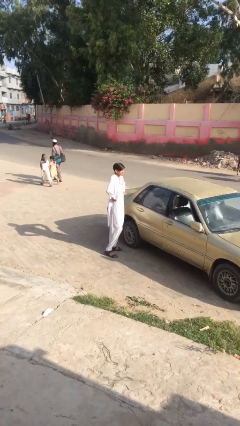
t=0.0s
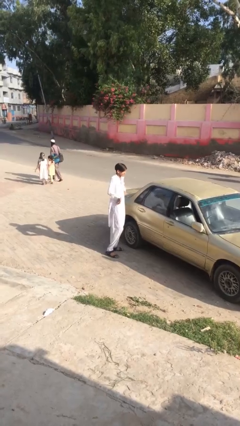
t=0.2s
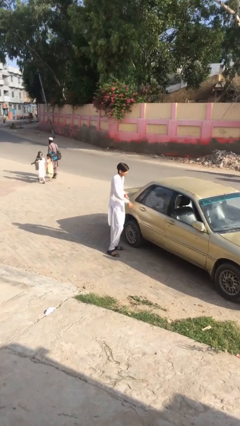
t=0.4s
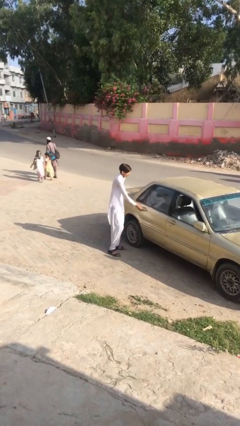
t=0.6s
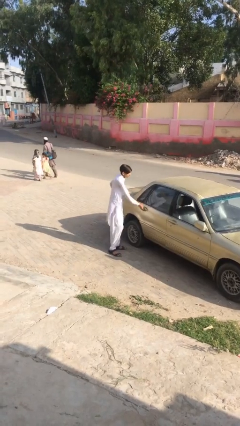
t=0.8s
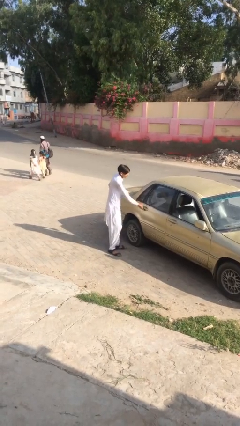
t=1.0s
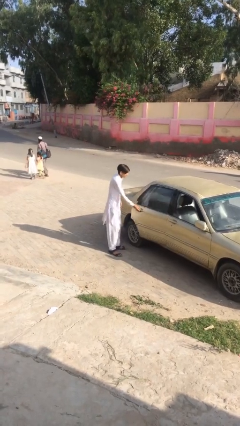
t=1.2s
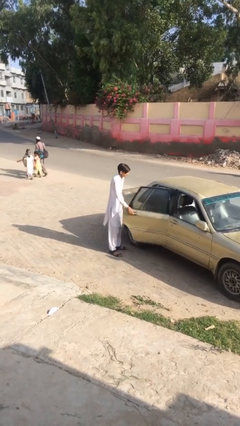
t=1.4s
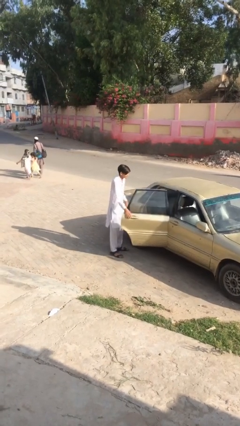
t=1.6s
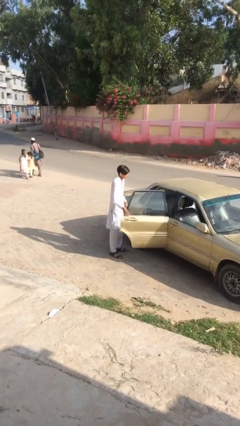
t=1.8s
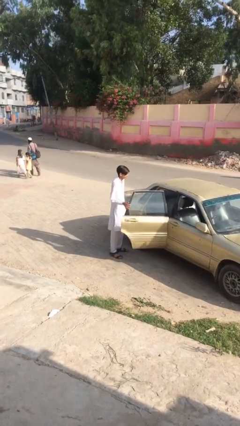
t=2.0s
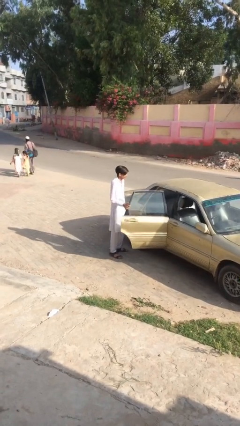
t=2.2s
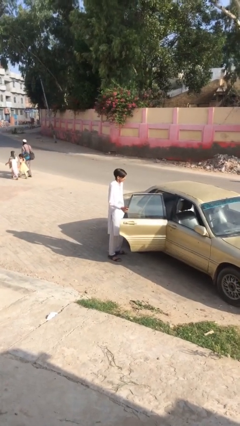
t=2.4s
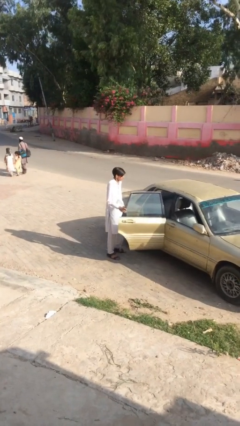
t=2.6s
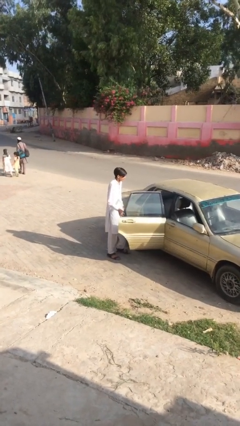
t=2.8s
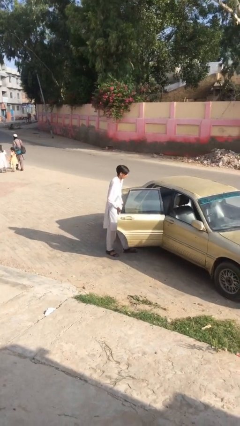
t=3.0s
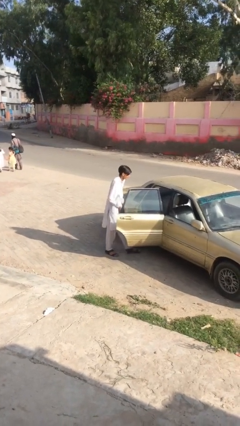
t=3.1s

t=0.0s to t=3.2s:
person opens car door

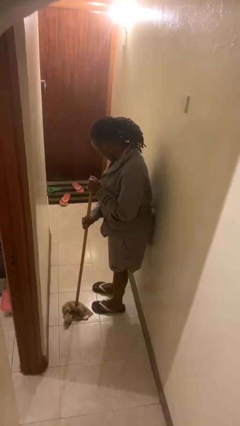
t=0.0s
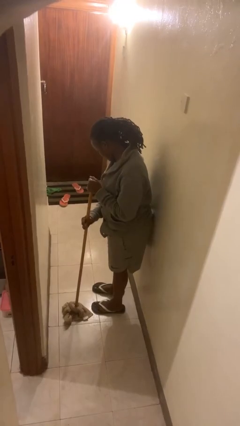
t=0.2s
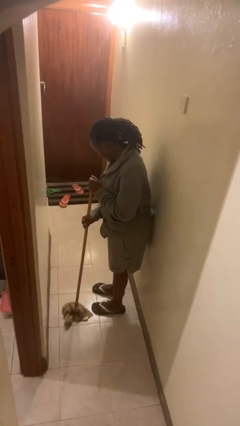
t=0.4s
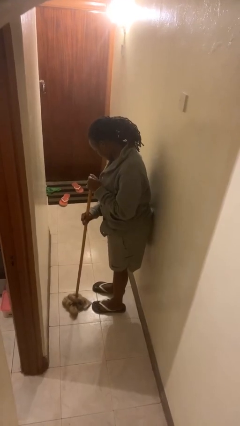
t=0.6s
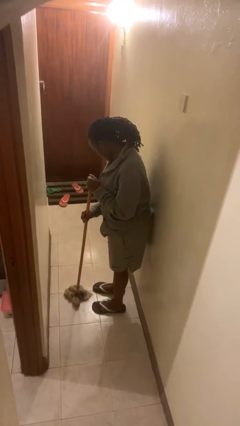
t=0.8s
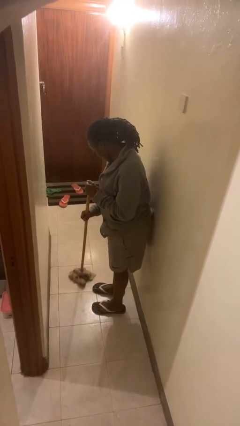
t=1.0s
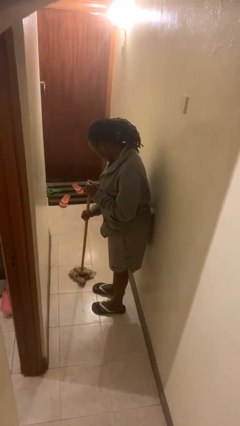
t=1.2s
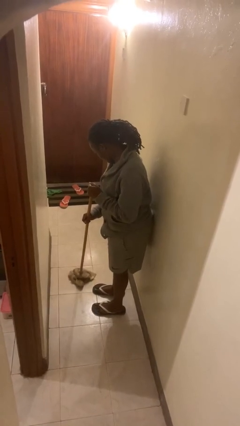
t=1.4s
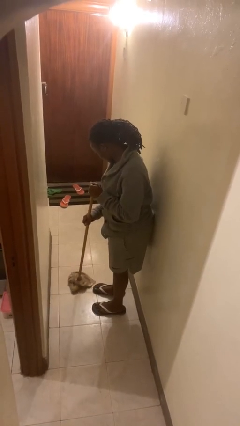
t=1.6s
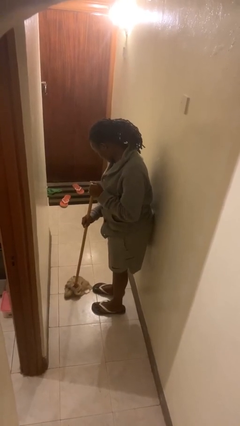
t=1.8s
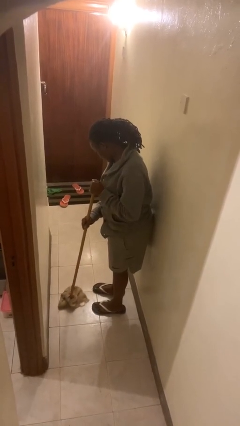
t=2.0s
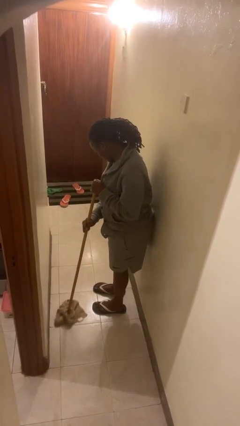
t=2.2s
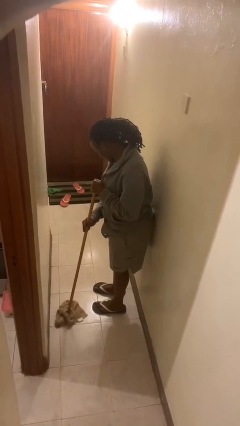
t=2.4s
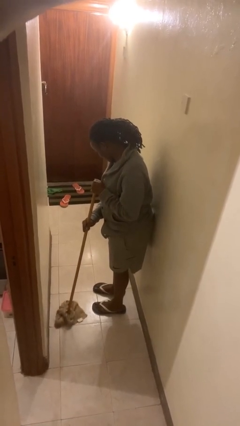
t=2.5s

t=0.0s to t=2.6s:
person mops

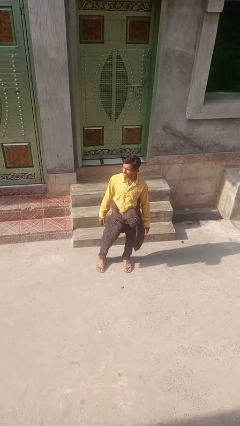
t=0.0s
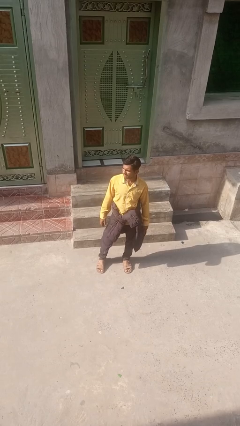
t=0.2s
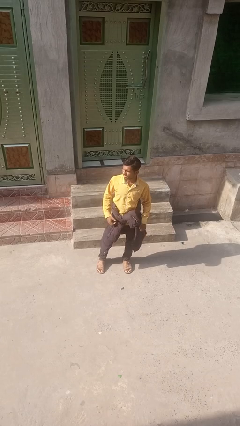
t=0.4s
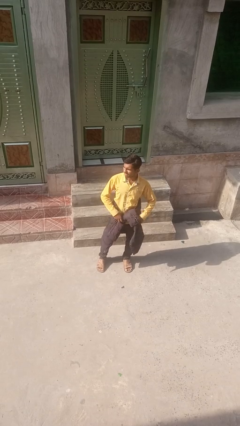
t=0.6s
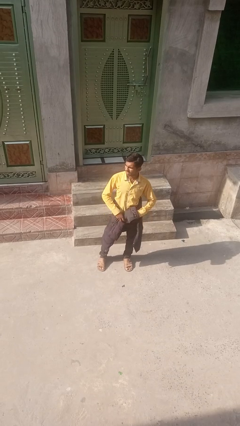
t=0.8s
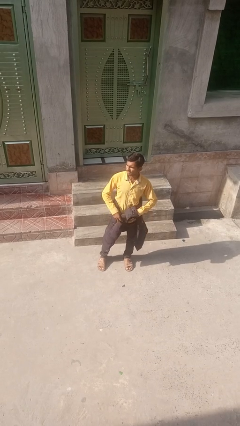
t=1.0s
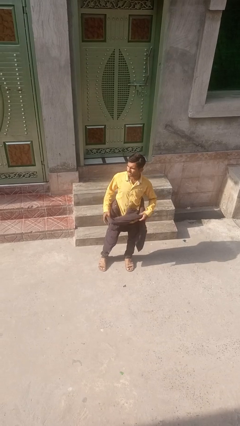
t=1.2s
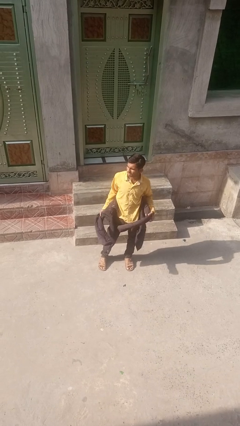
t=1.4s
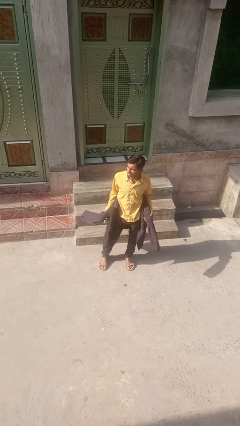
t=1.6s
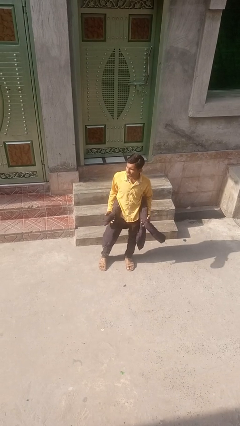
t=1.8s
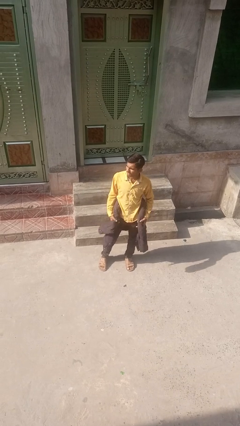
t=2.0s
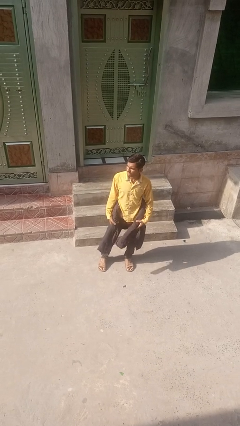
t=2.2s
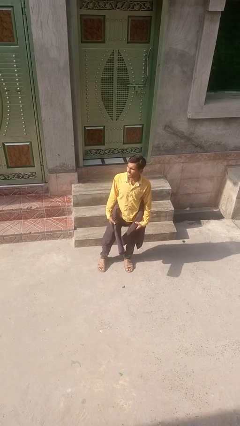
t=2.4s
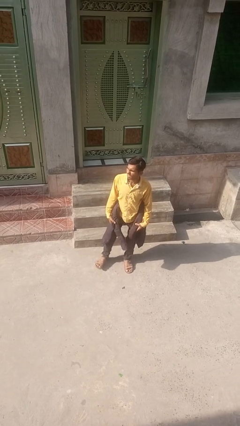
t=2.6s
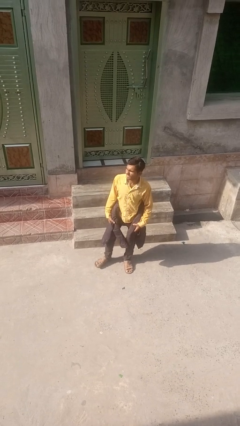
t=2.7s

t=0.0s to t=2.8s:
person unties jacket around waist

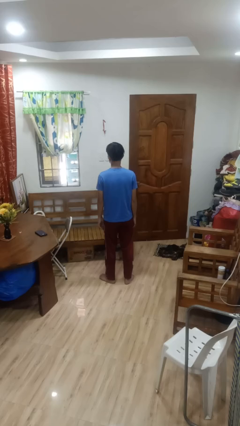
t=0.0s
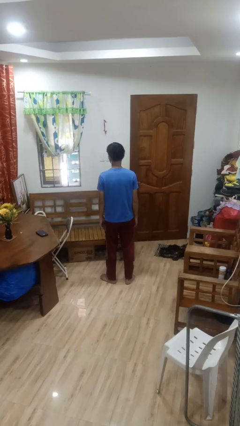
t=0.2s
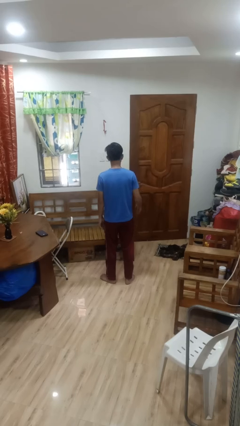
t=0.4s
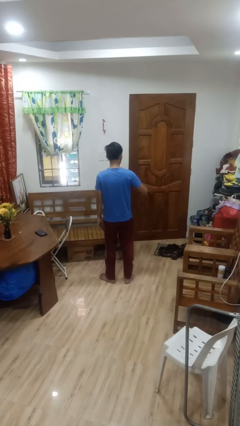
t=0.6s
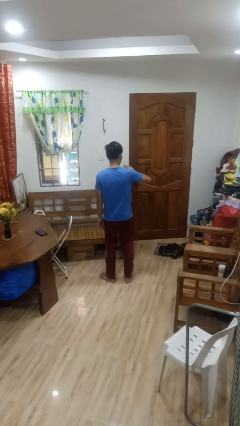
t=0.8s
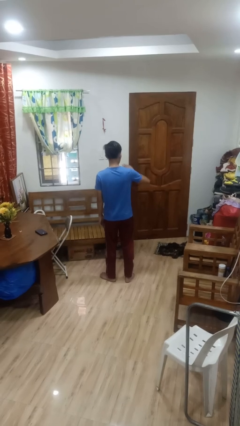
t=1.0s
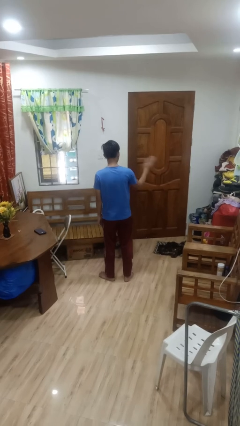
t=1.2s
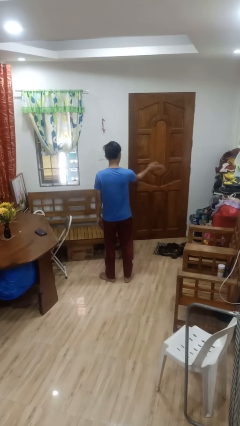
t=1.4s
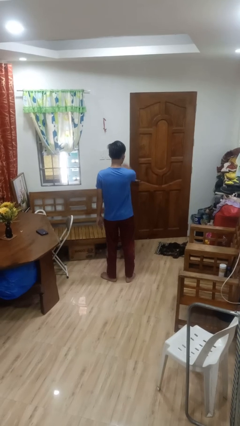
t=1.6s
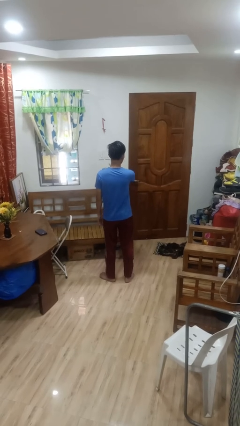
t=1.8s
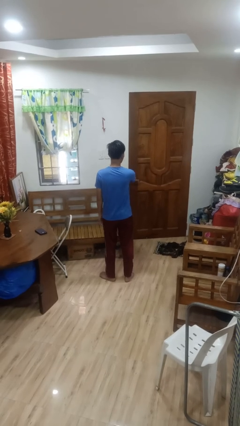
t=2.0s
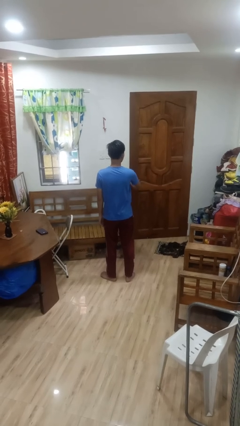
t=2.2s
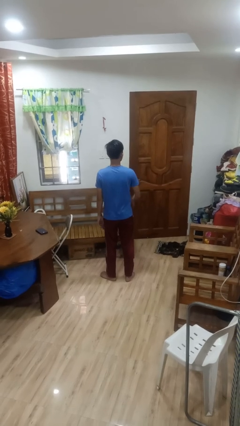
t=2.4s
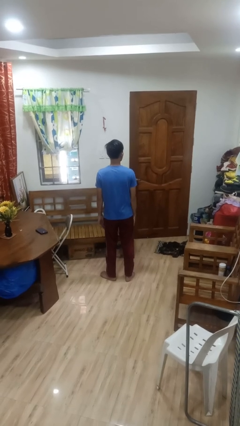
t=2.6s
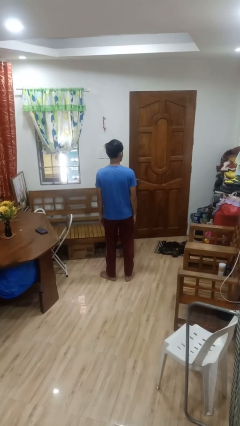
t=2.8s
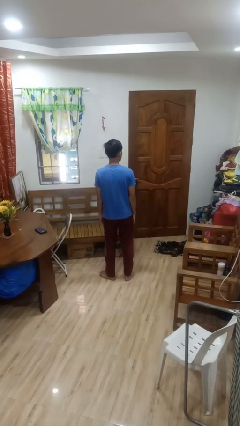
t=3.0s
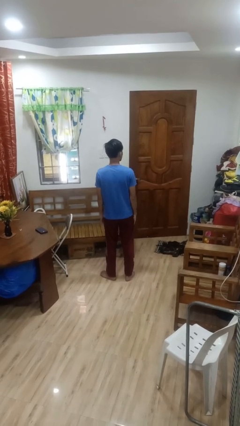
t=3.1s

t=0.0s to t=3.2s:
person gestures swipe left

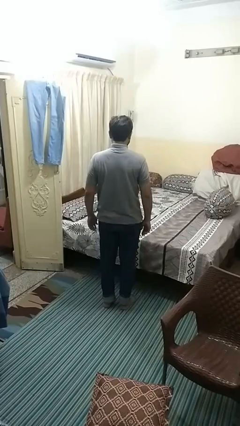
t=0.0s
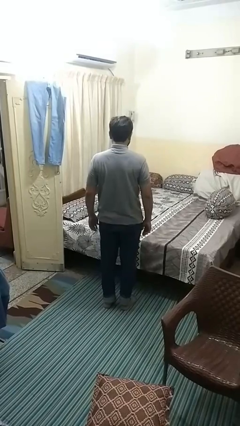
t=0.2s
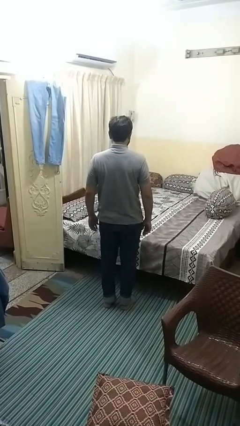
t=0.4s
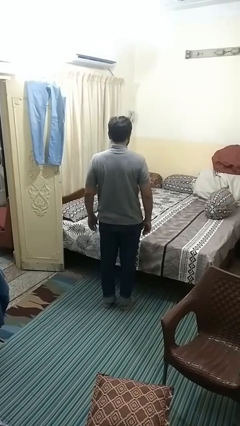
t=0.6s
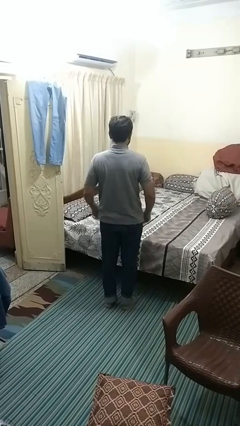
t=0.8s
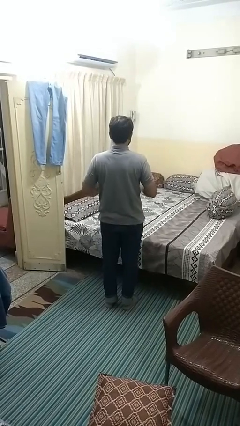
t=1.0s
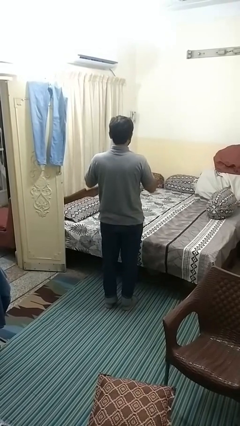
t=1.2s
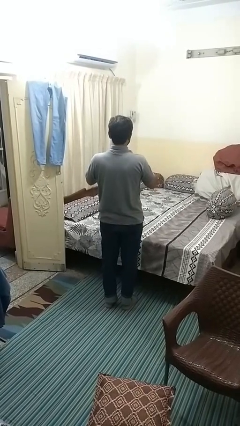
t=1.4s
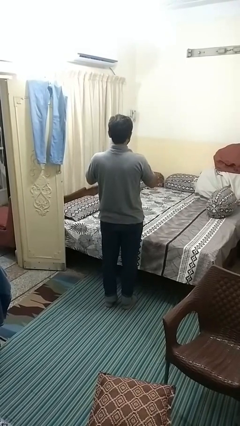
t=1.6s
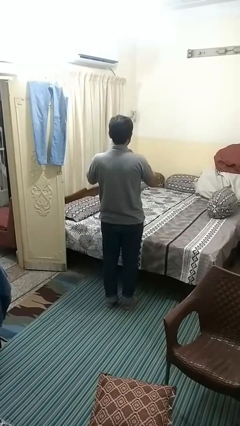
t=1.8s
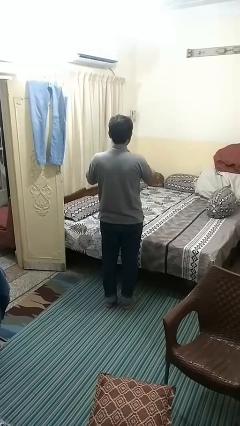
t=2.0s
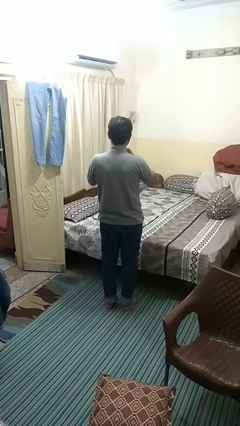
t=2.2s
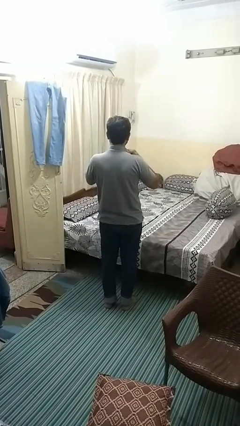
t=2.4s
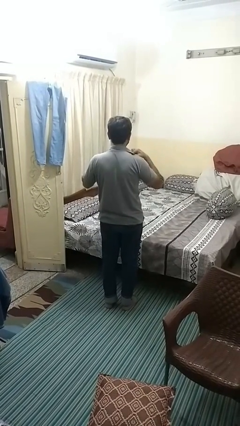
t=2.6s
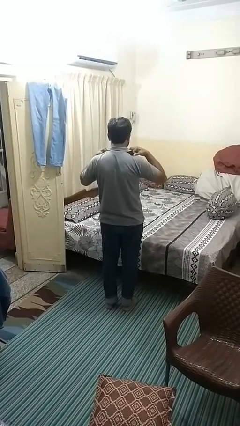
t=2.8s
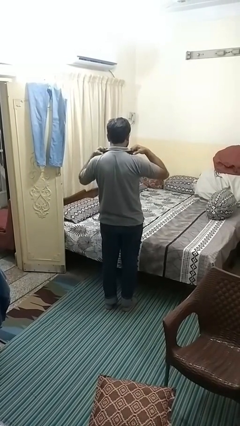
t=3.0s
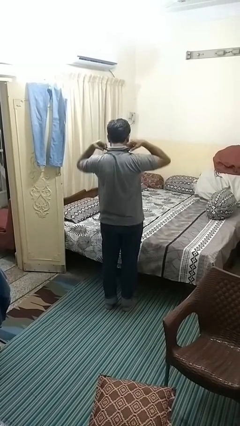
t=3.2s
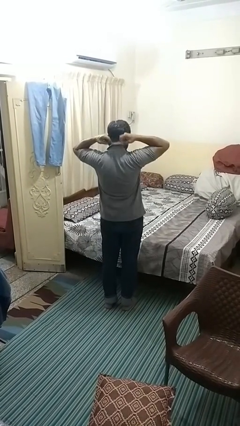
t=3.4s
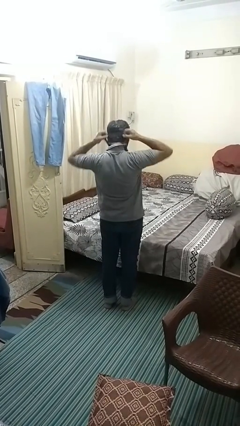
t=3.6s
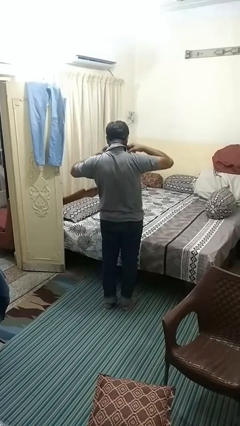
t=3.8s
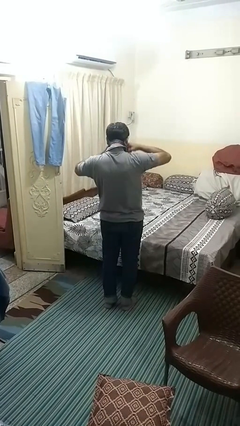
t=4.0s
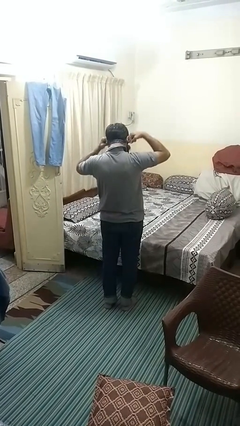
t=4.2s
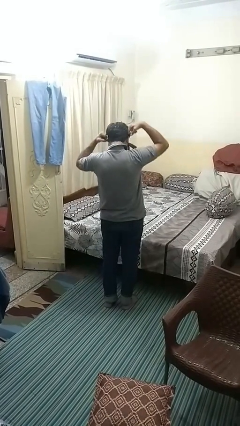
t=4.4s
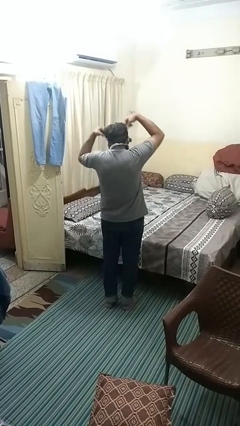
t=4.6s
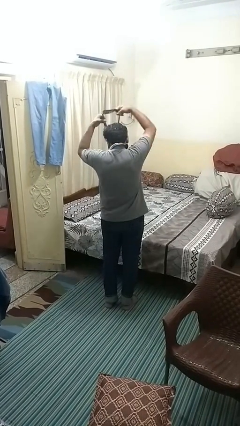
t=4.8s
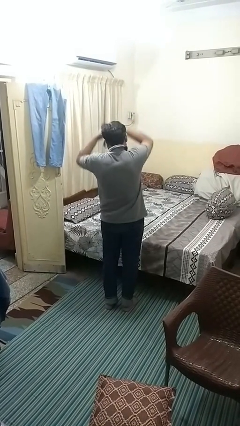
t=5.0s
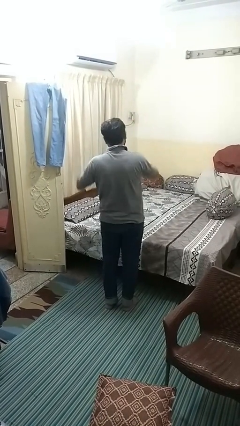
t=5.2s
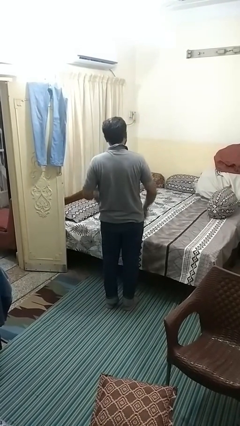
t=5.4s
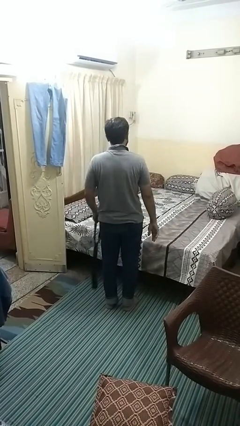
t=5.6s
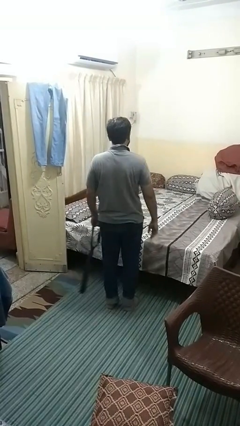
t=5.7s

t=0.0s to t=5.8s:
person takes off necktie
